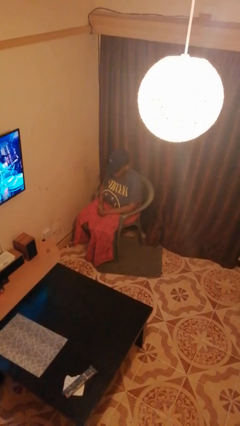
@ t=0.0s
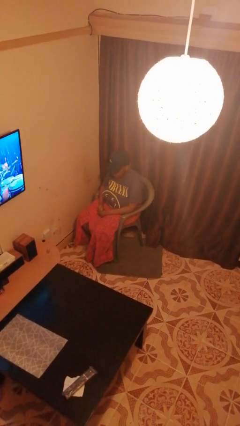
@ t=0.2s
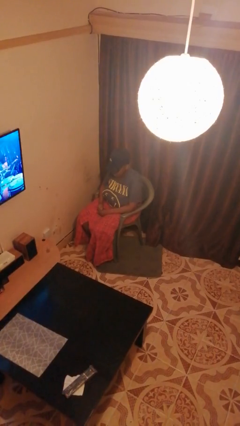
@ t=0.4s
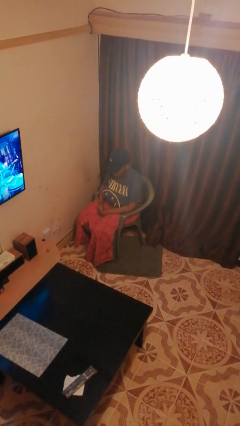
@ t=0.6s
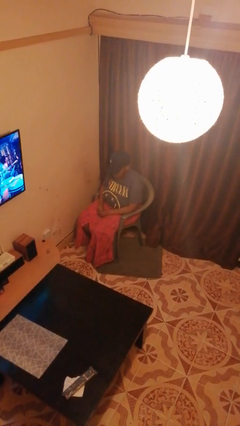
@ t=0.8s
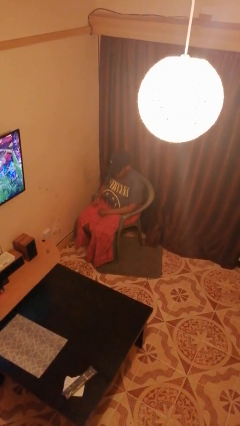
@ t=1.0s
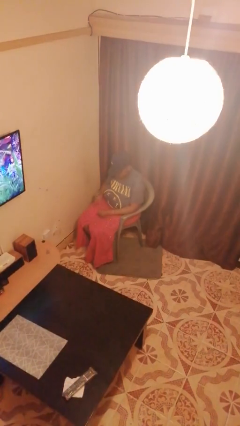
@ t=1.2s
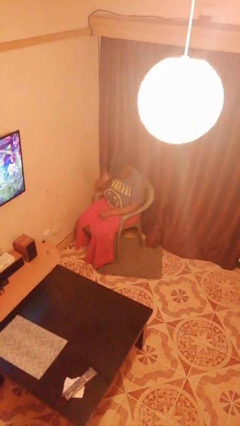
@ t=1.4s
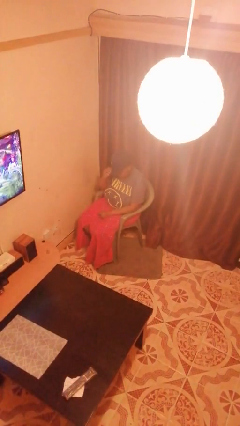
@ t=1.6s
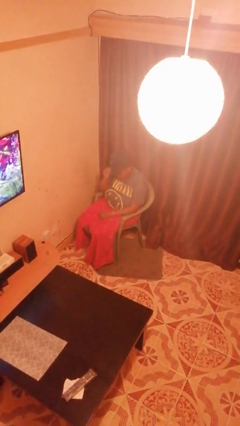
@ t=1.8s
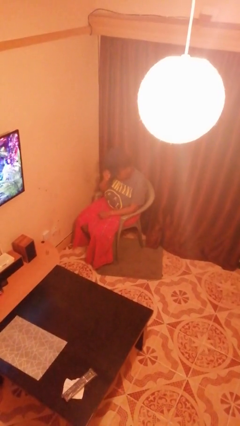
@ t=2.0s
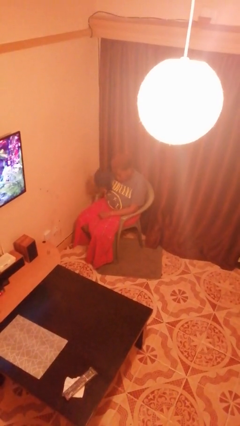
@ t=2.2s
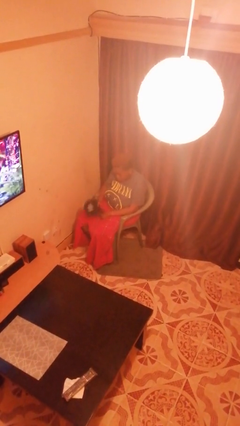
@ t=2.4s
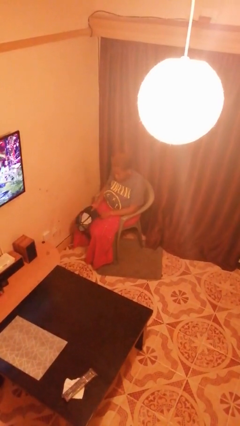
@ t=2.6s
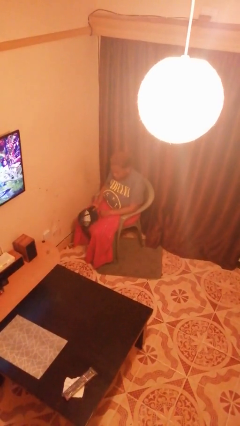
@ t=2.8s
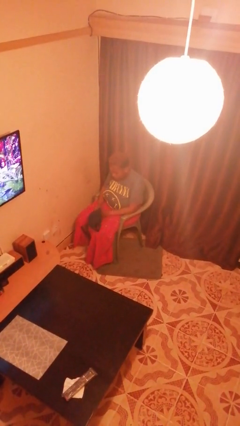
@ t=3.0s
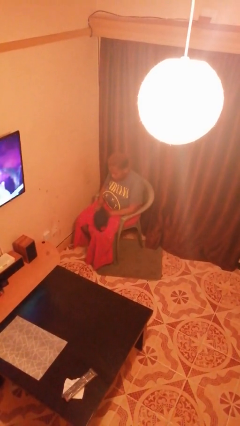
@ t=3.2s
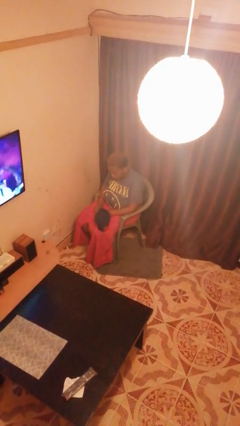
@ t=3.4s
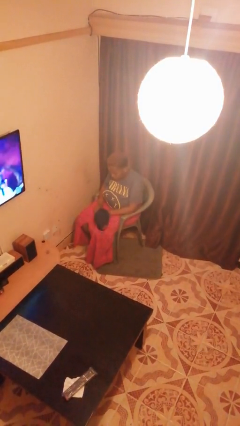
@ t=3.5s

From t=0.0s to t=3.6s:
person takes off hat

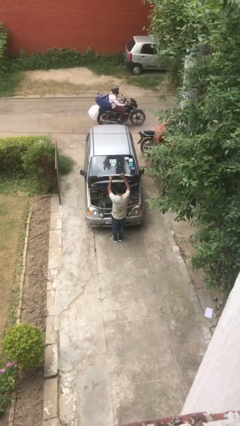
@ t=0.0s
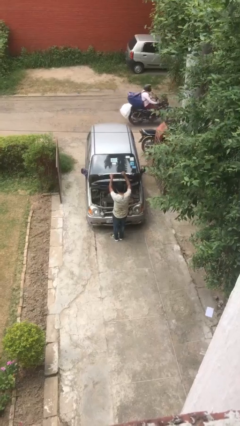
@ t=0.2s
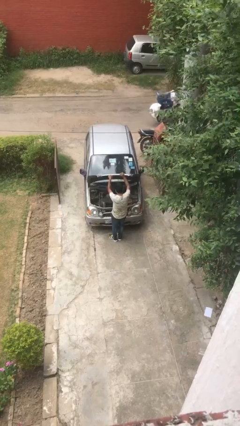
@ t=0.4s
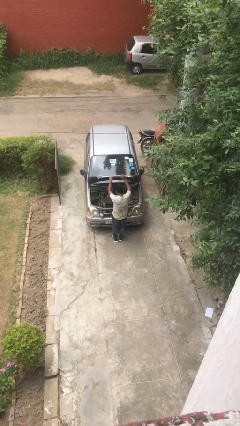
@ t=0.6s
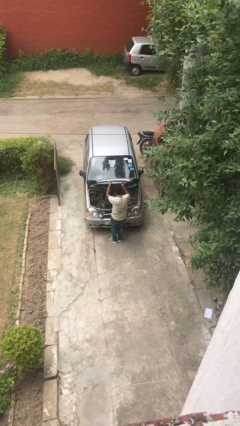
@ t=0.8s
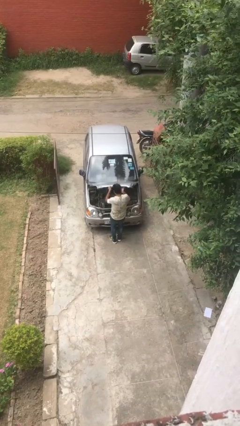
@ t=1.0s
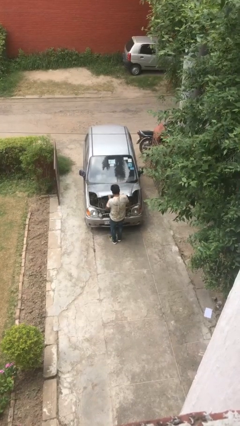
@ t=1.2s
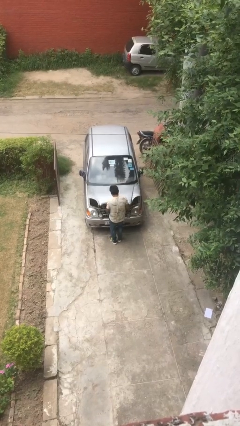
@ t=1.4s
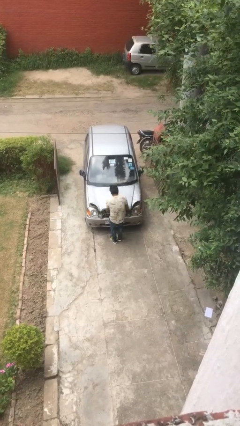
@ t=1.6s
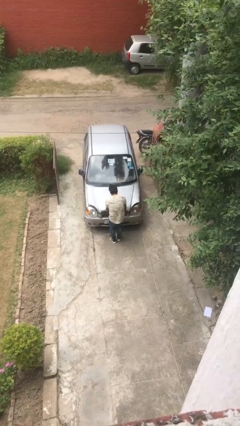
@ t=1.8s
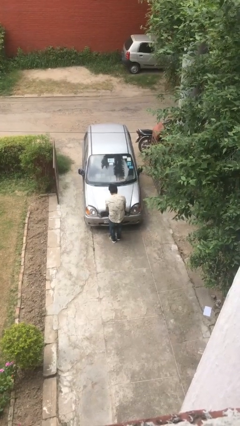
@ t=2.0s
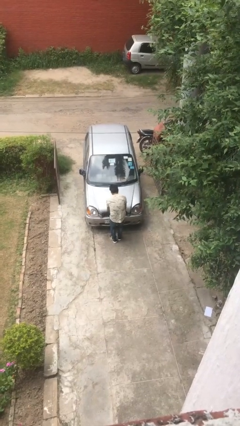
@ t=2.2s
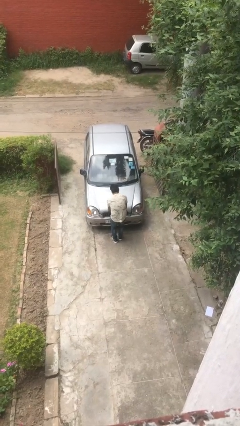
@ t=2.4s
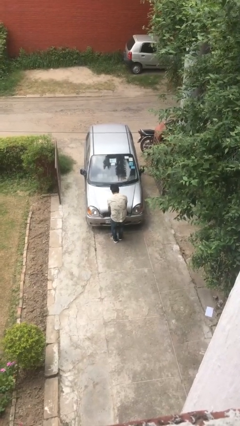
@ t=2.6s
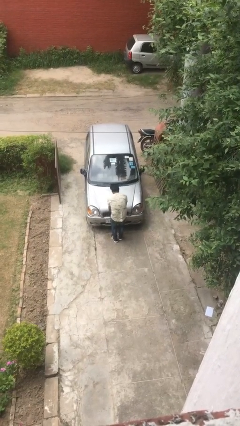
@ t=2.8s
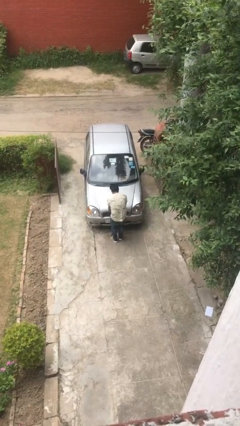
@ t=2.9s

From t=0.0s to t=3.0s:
person closes car hood

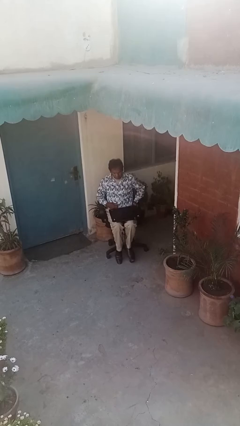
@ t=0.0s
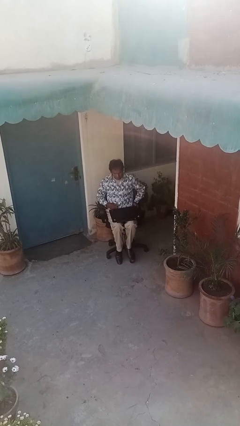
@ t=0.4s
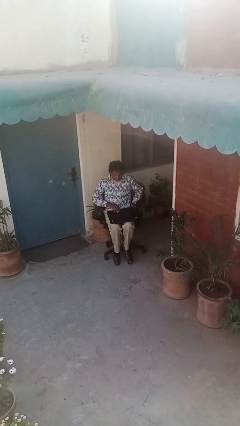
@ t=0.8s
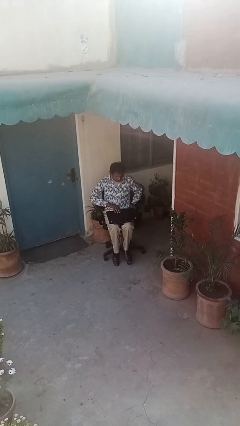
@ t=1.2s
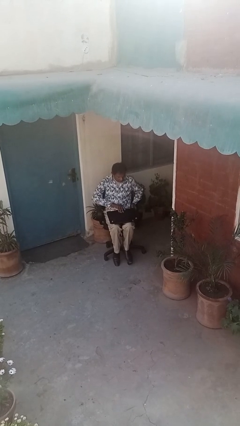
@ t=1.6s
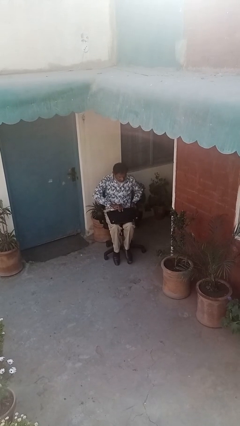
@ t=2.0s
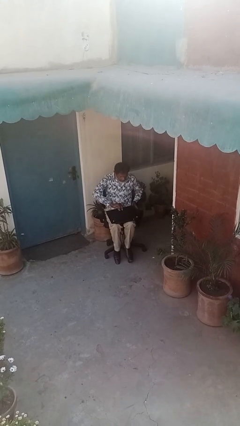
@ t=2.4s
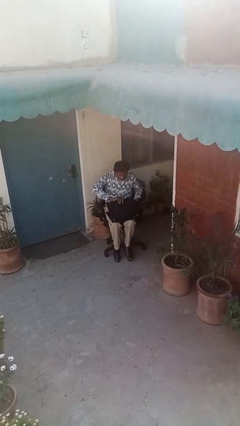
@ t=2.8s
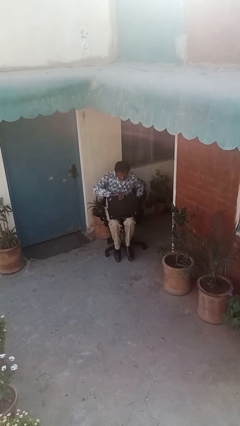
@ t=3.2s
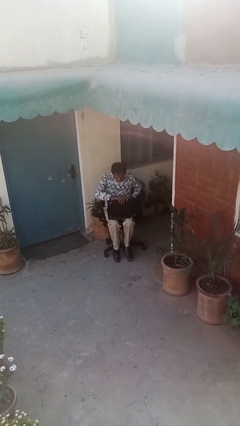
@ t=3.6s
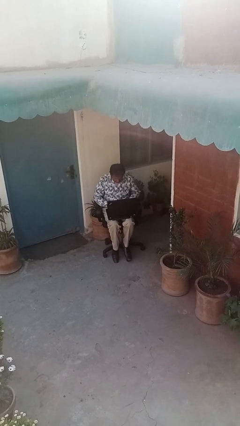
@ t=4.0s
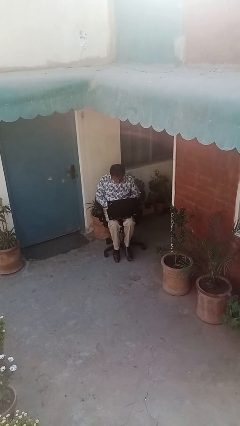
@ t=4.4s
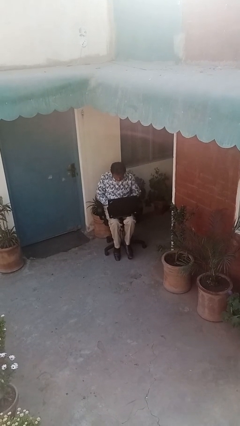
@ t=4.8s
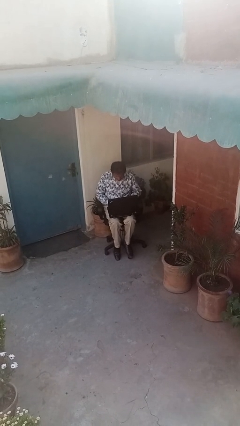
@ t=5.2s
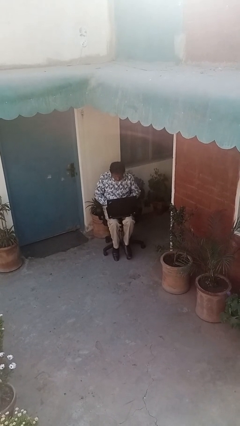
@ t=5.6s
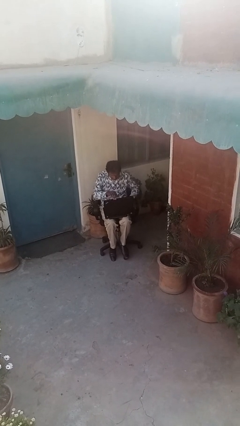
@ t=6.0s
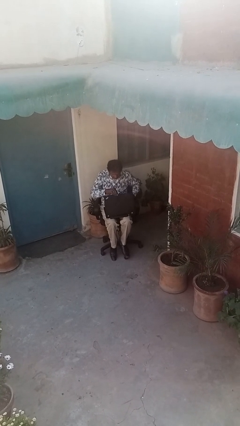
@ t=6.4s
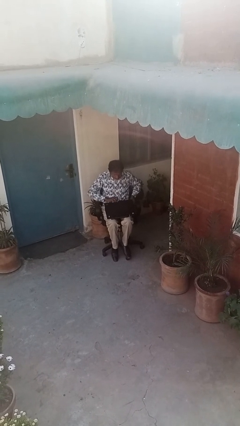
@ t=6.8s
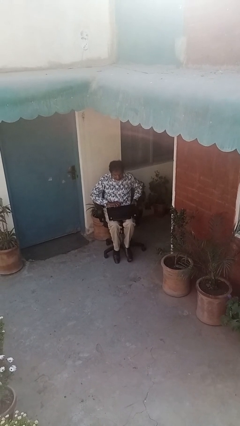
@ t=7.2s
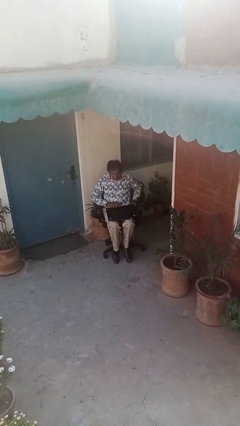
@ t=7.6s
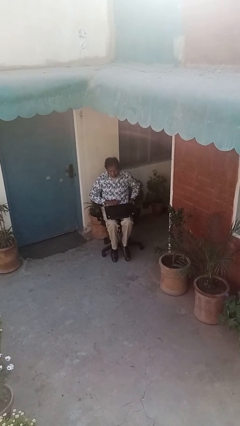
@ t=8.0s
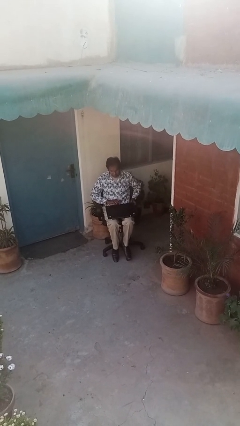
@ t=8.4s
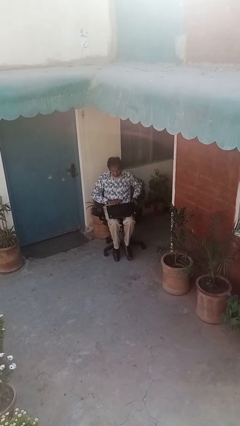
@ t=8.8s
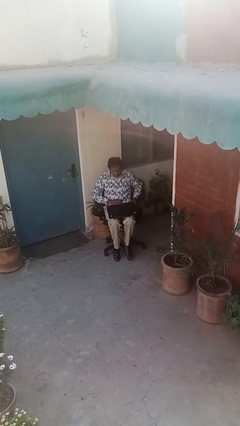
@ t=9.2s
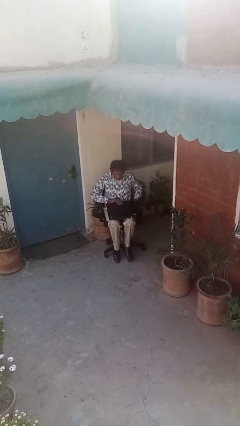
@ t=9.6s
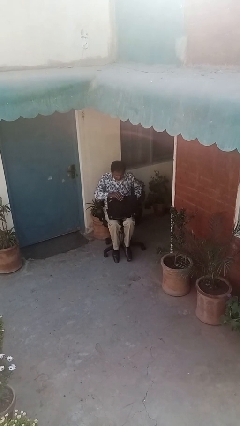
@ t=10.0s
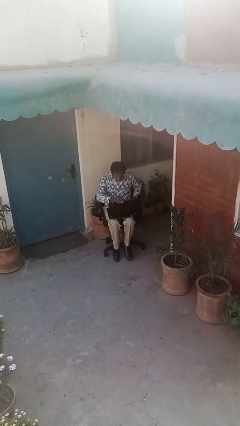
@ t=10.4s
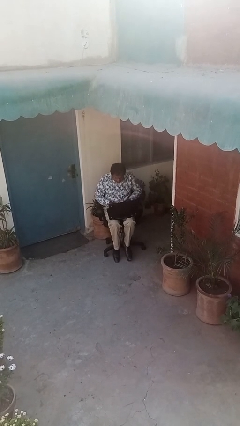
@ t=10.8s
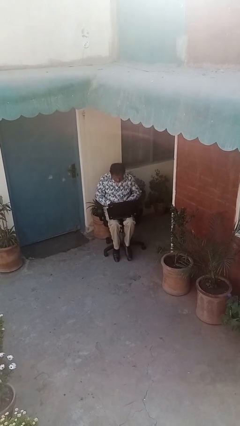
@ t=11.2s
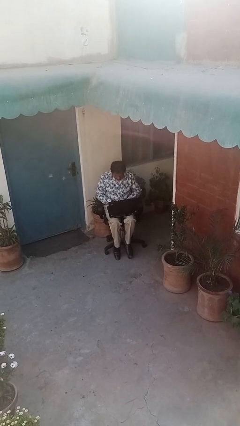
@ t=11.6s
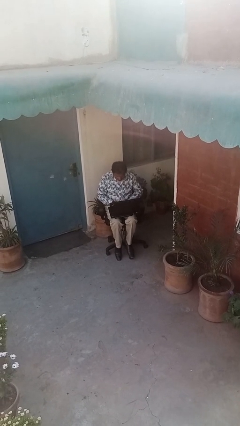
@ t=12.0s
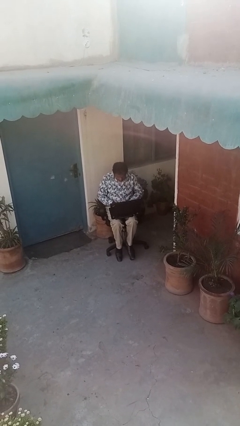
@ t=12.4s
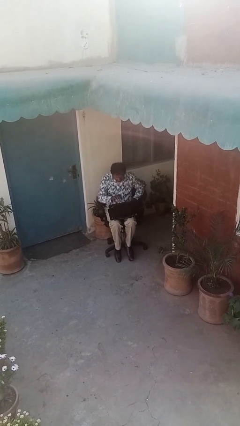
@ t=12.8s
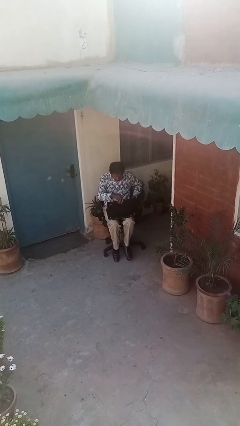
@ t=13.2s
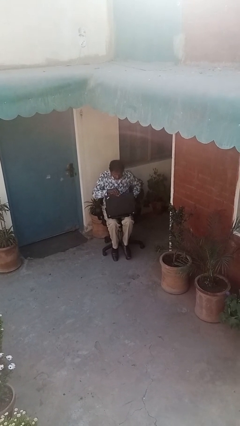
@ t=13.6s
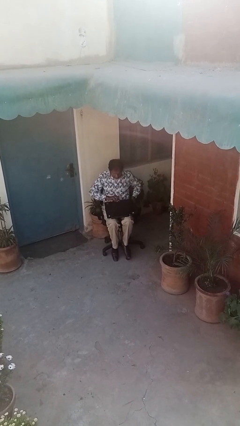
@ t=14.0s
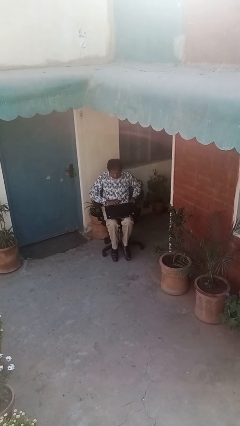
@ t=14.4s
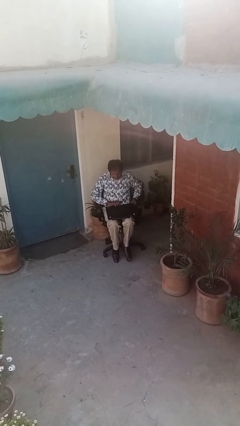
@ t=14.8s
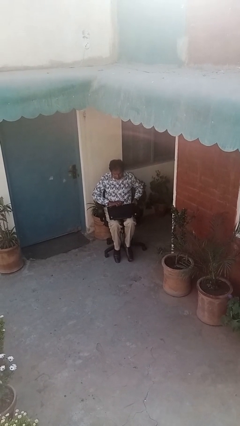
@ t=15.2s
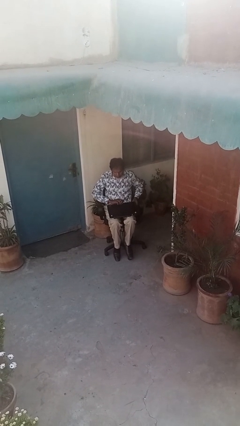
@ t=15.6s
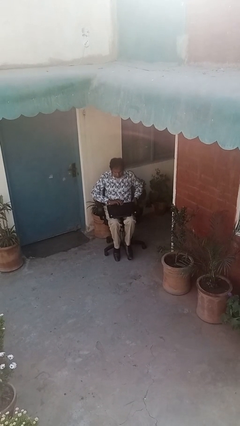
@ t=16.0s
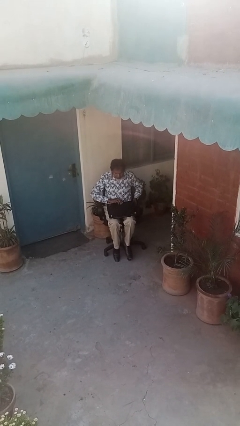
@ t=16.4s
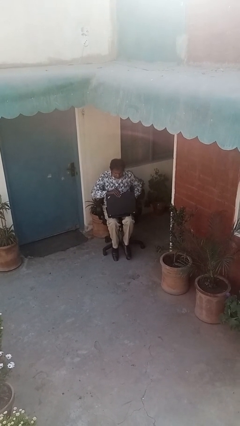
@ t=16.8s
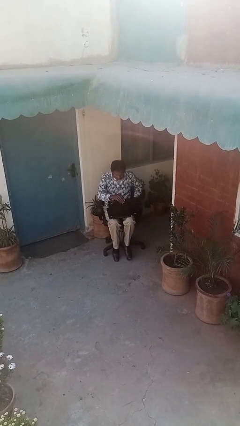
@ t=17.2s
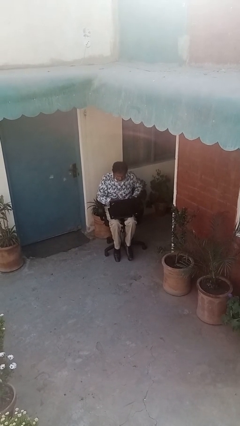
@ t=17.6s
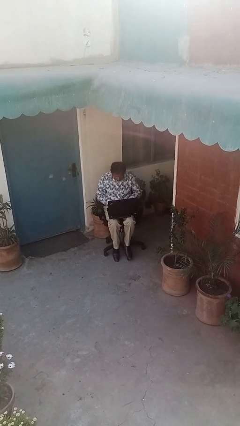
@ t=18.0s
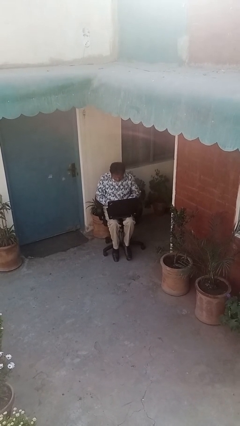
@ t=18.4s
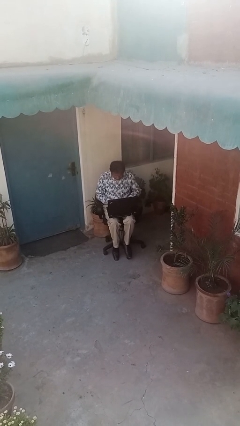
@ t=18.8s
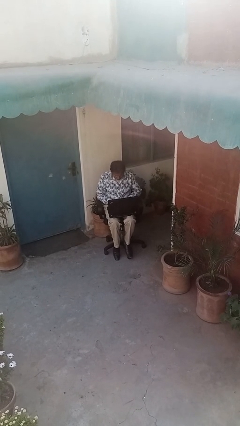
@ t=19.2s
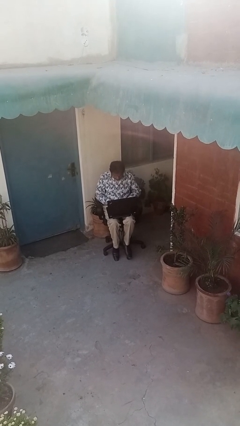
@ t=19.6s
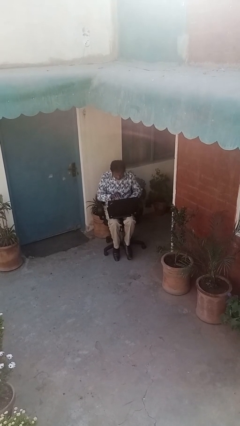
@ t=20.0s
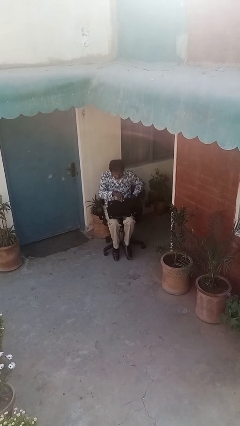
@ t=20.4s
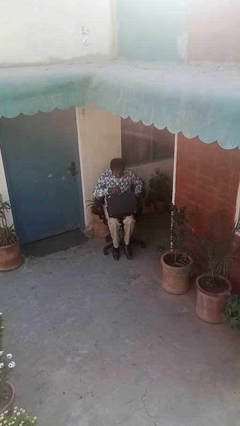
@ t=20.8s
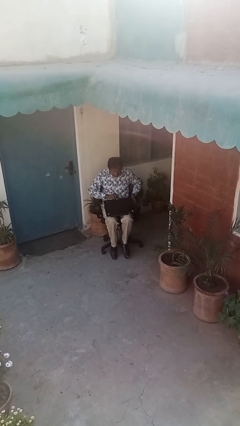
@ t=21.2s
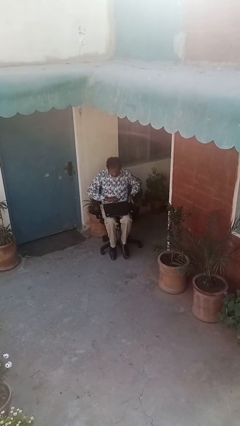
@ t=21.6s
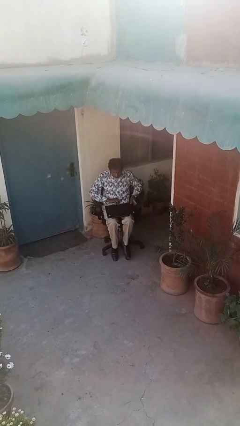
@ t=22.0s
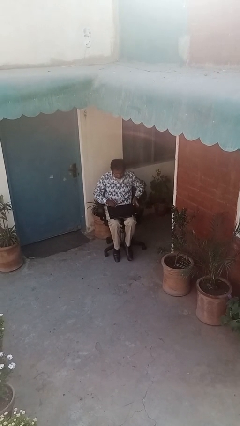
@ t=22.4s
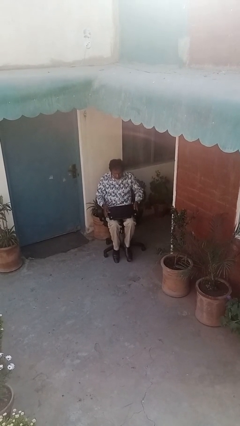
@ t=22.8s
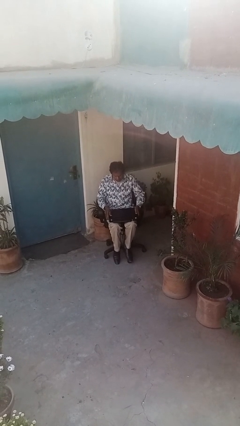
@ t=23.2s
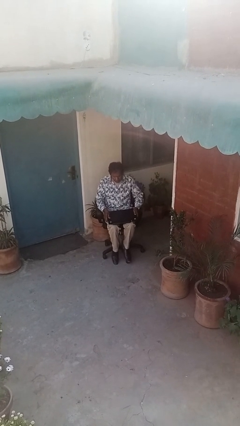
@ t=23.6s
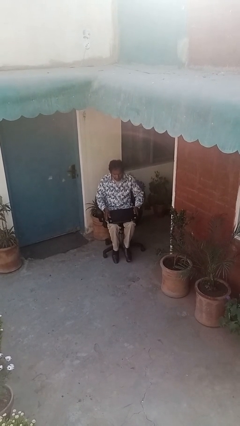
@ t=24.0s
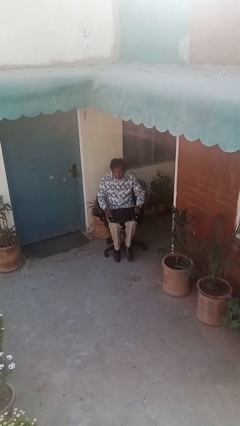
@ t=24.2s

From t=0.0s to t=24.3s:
person interacts with laptop
